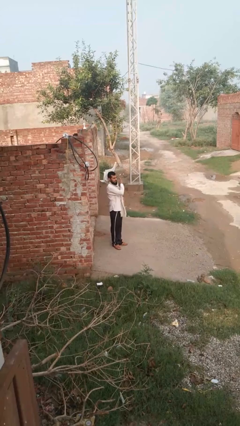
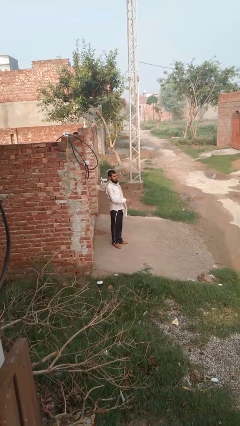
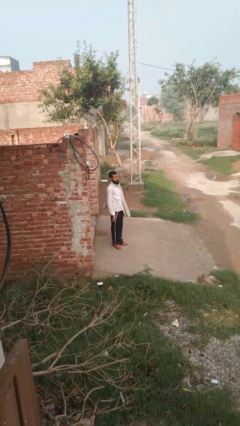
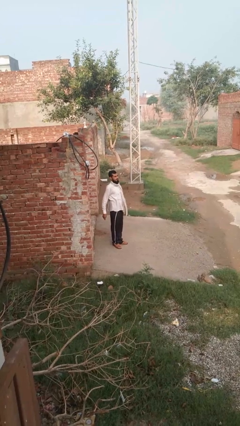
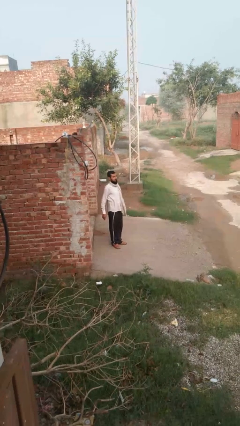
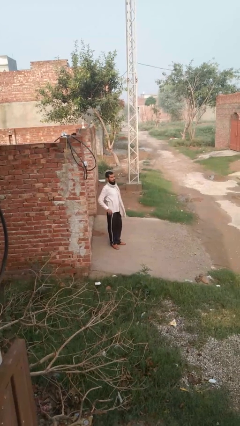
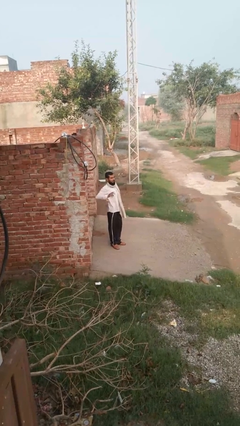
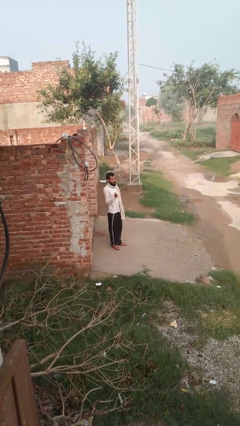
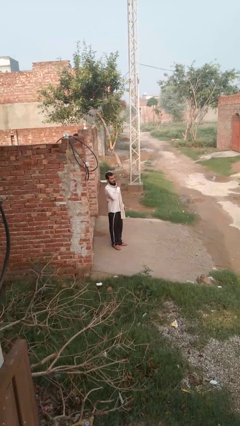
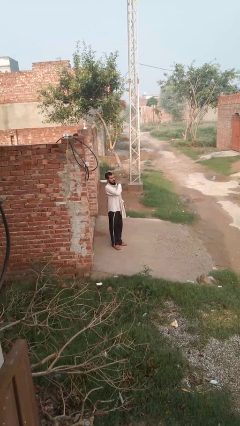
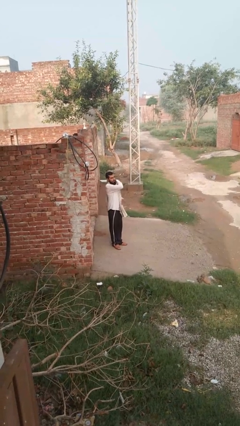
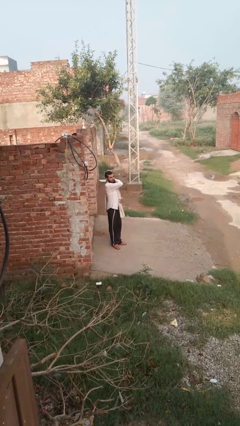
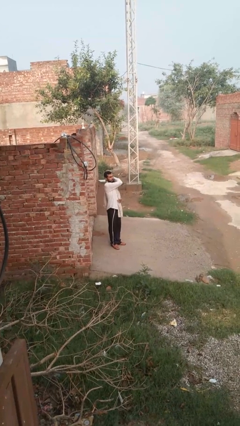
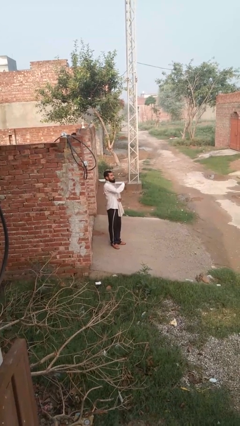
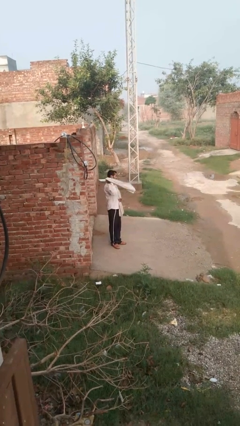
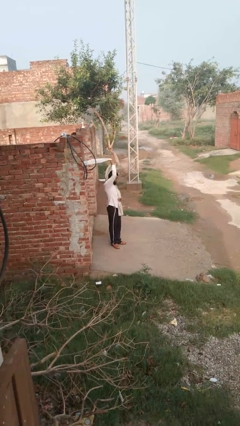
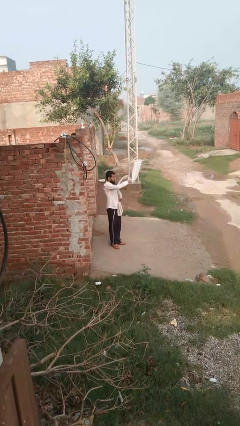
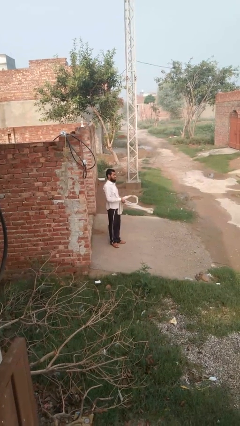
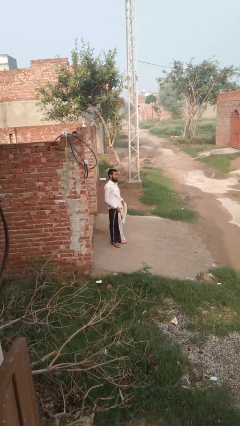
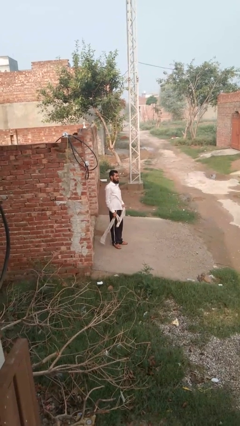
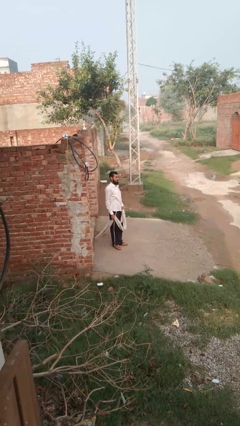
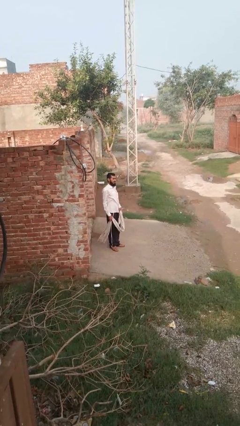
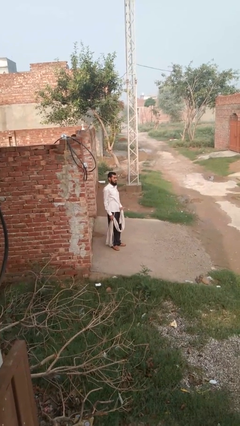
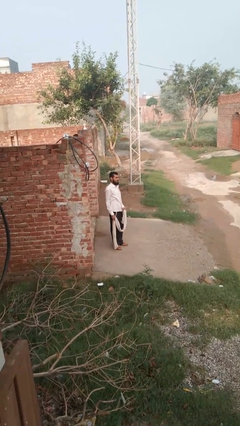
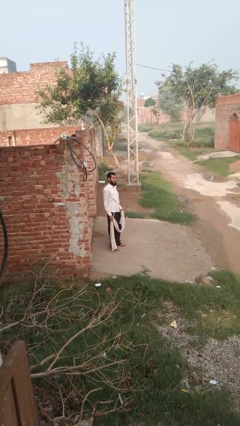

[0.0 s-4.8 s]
person takes off scarf

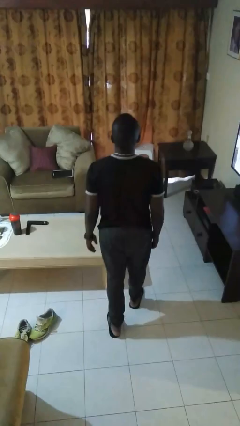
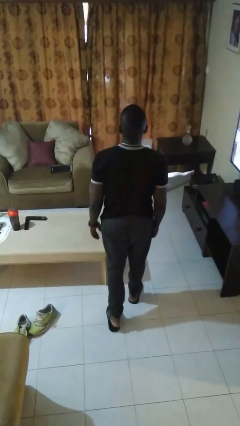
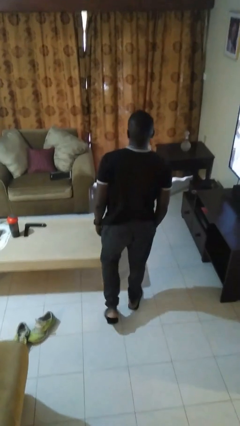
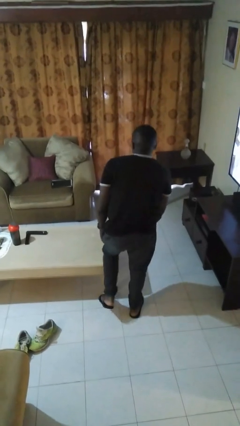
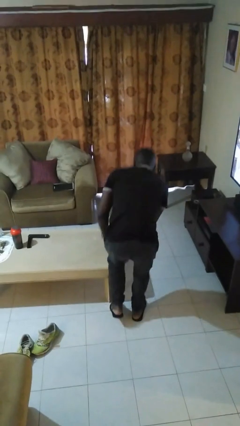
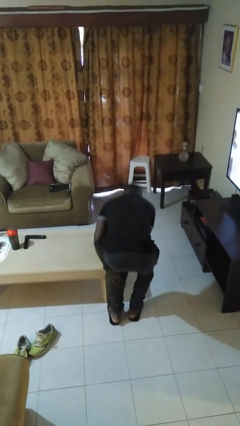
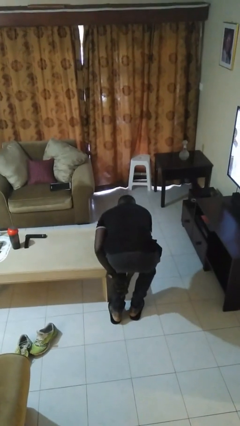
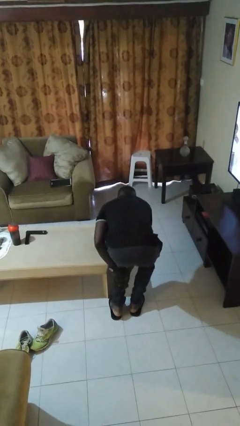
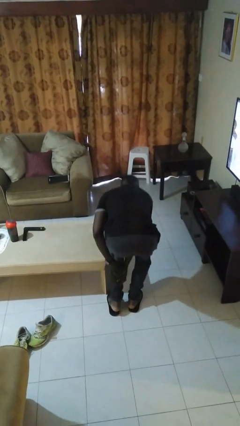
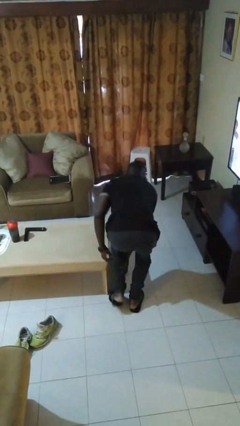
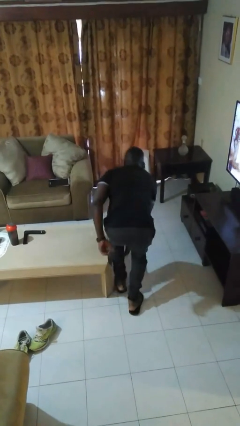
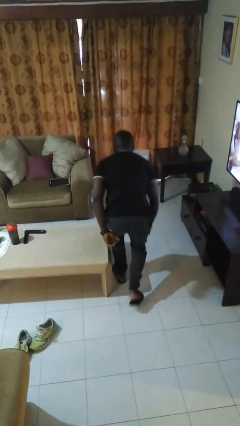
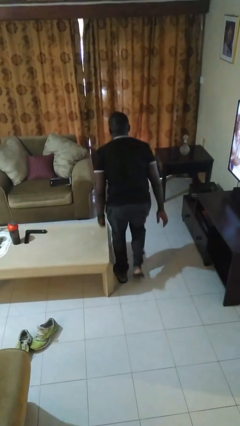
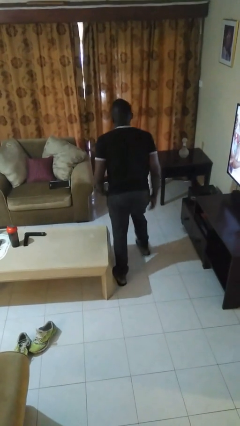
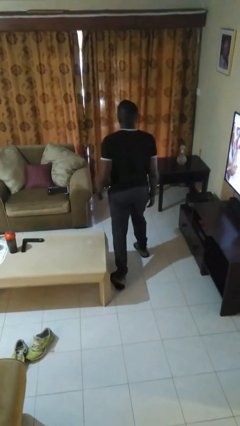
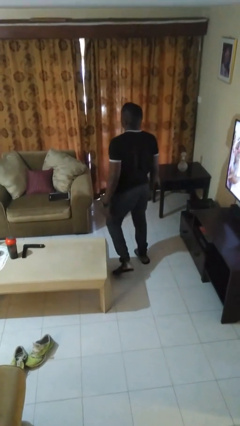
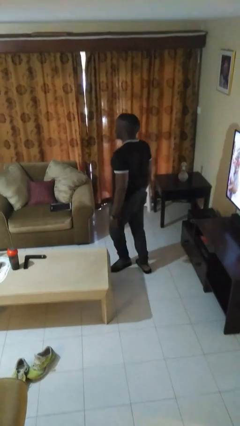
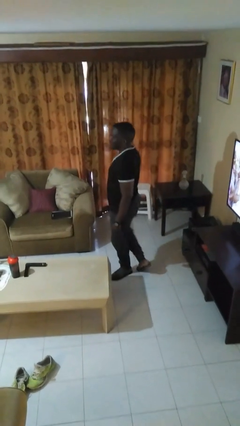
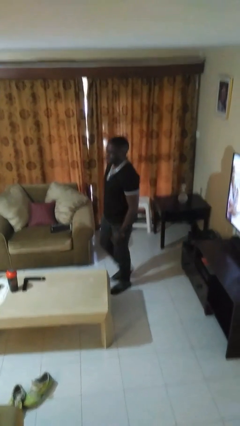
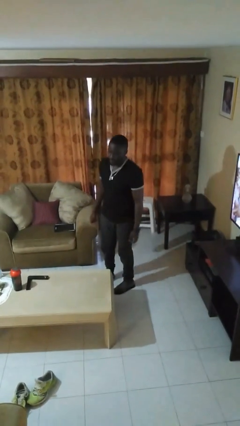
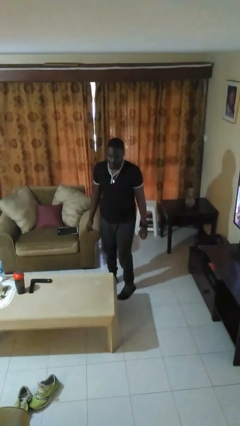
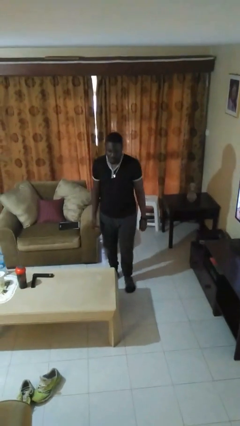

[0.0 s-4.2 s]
person bumps into table

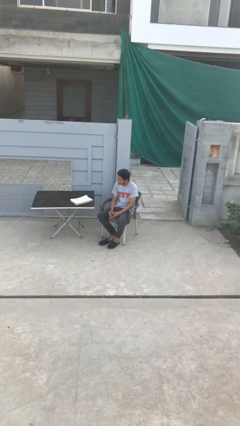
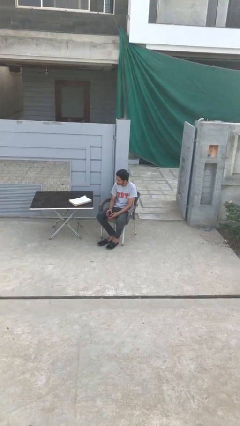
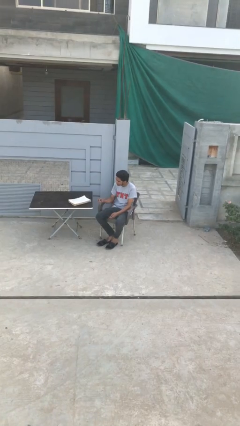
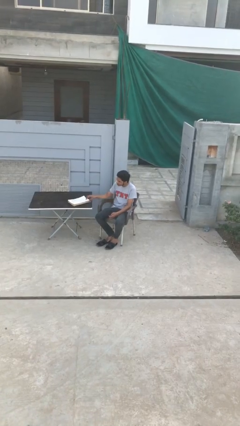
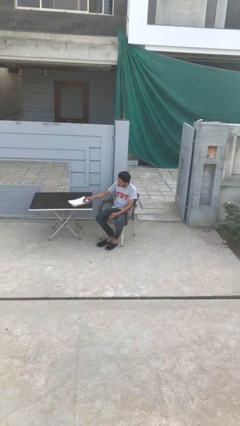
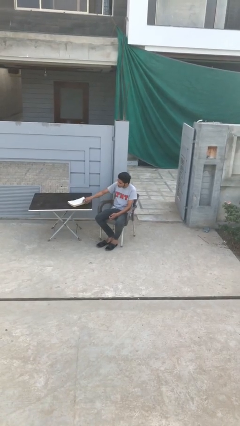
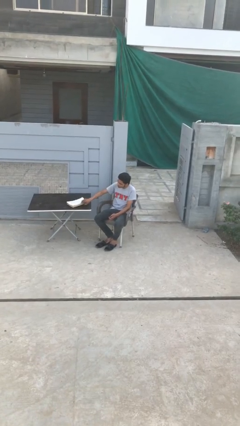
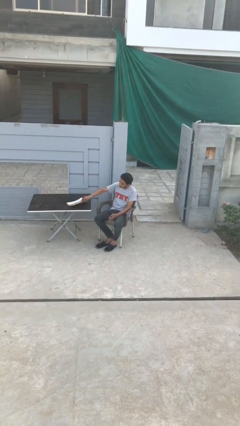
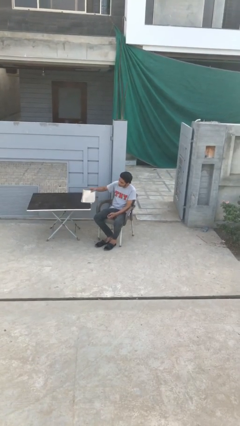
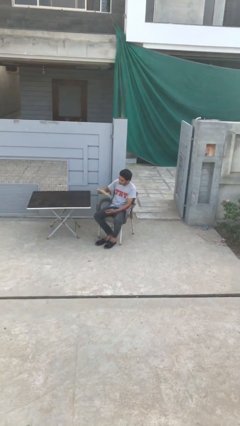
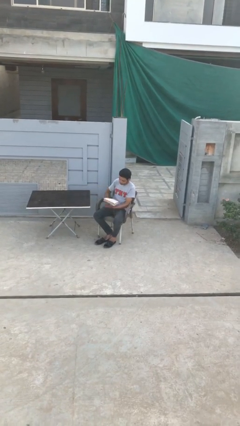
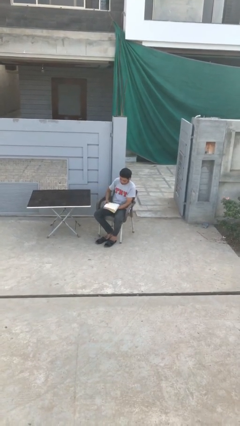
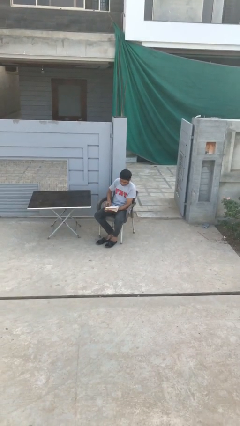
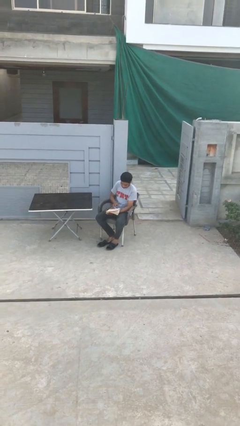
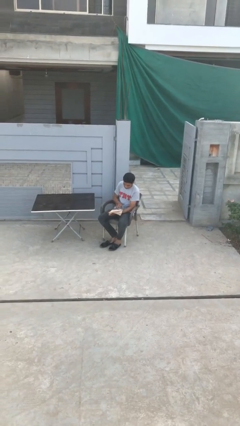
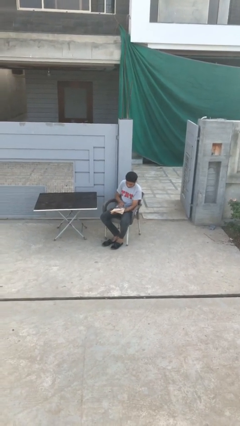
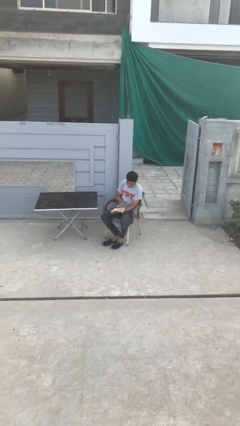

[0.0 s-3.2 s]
person picks up object from table

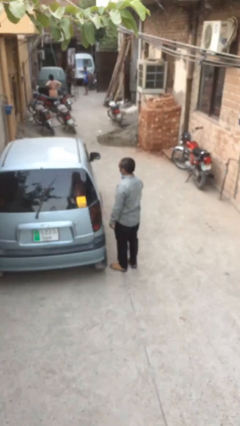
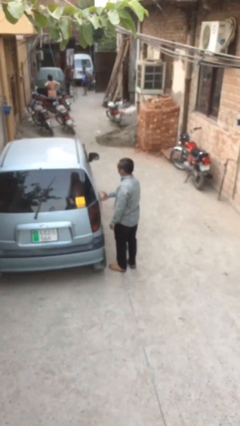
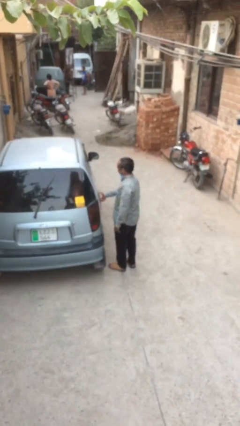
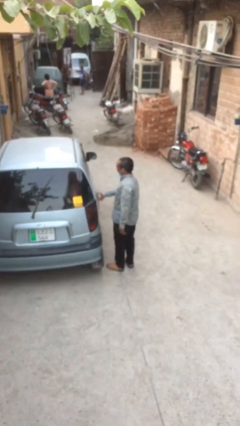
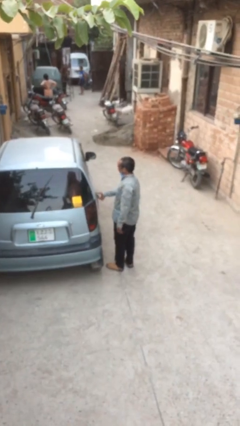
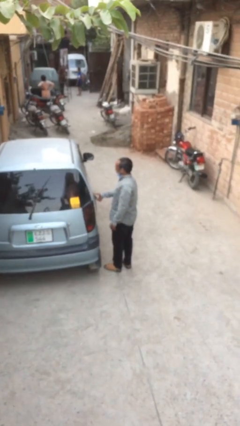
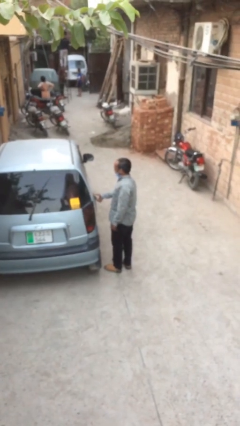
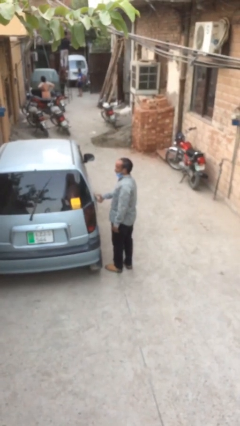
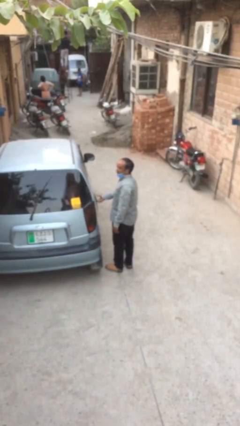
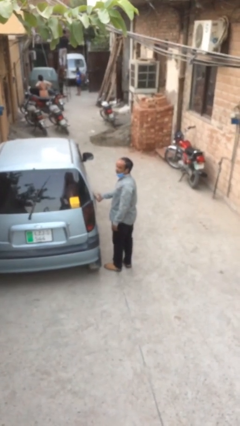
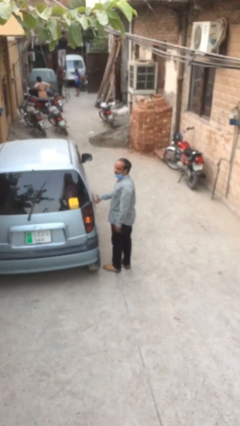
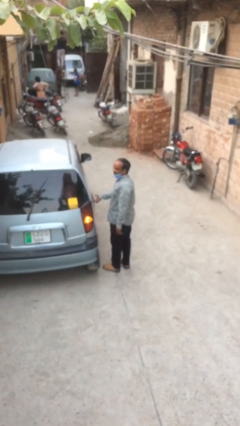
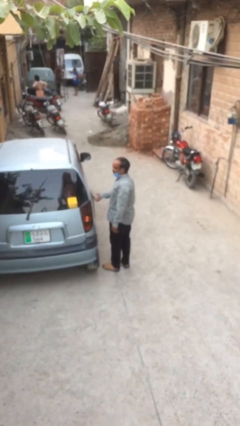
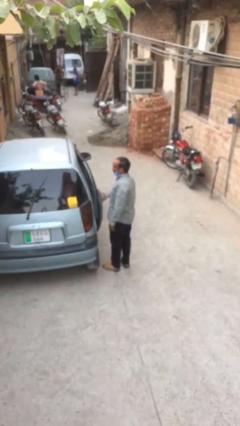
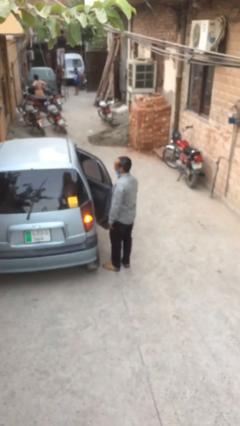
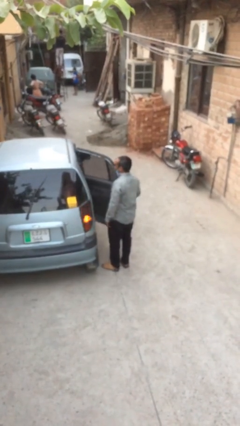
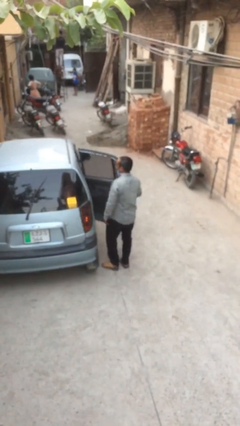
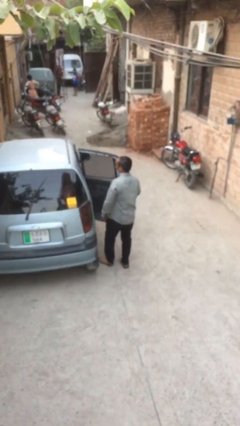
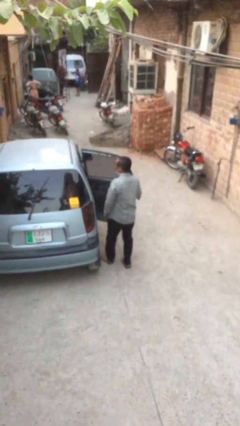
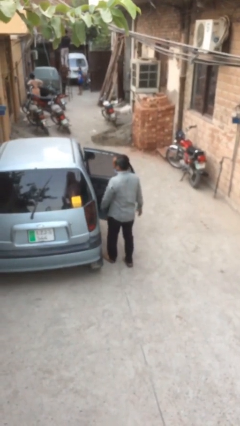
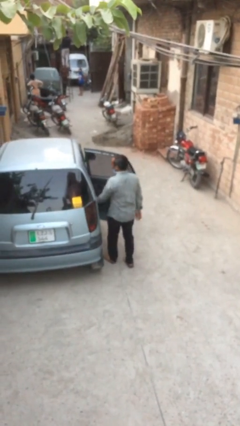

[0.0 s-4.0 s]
person opens car door

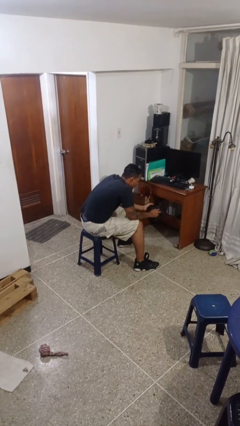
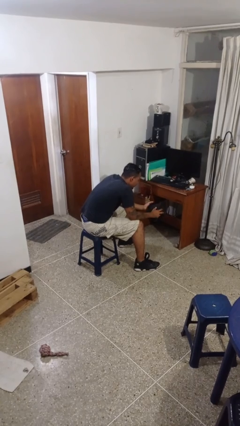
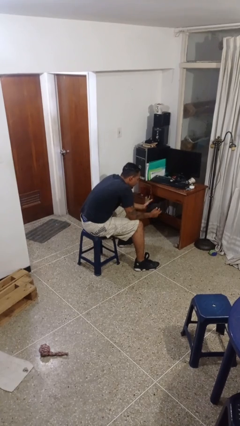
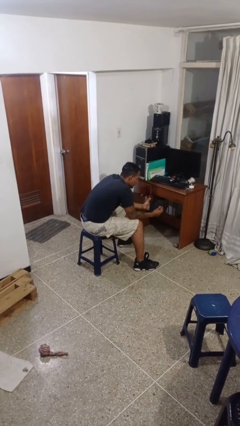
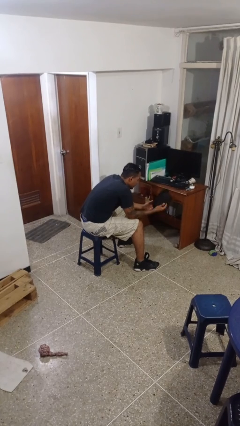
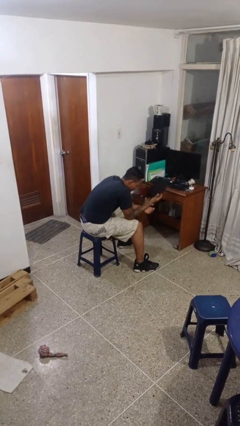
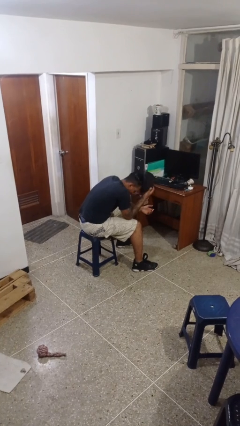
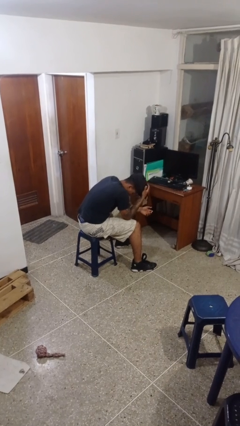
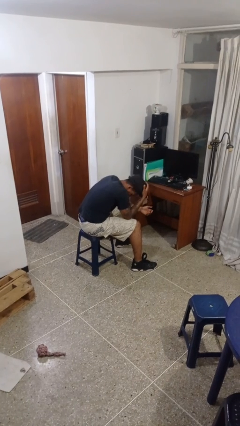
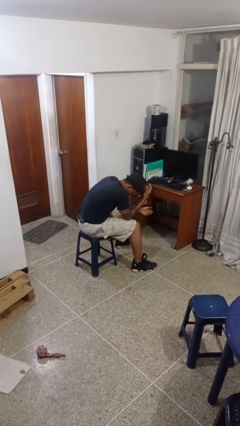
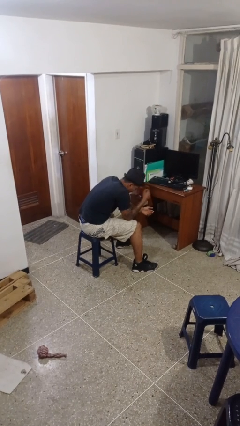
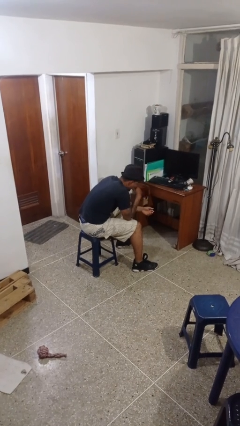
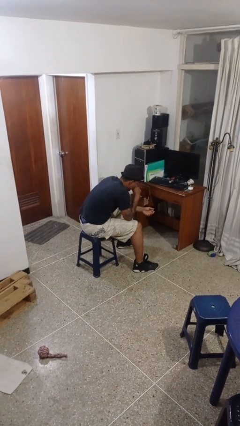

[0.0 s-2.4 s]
person puts on hat
